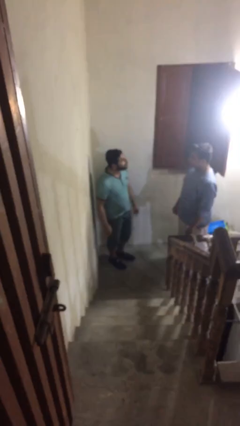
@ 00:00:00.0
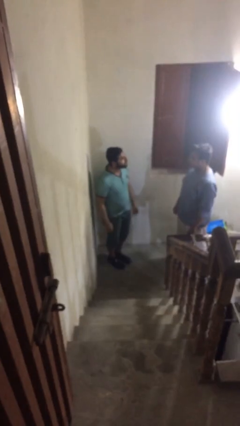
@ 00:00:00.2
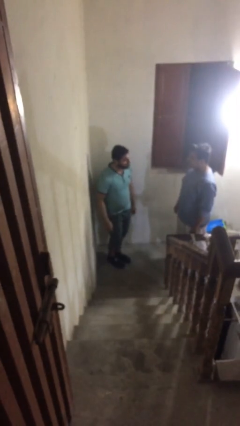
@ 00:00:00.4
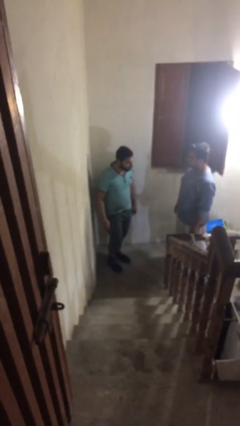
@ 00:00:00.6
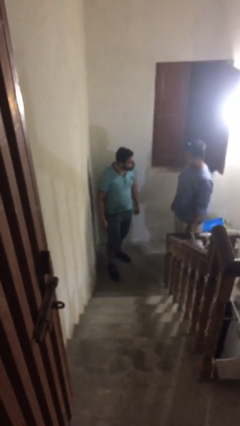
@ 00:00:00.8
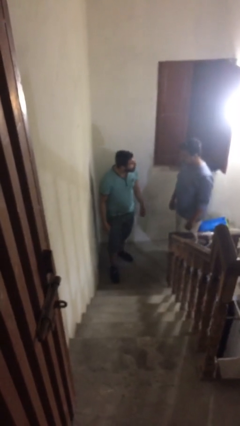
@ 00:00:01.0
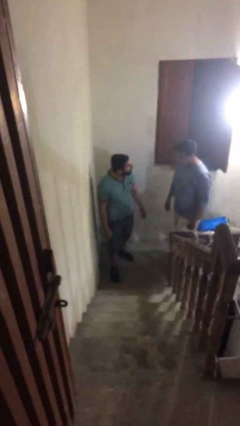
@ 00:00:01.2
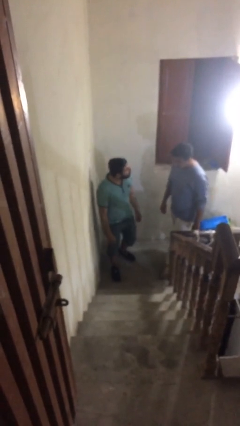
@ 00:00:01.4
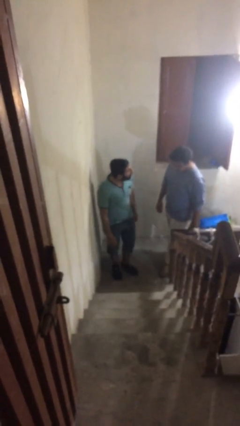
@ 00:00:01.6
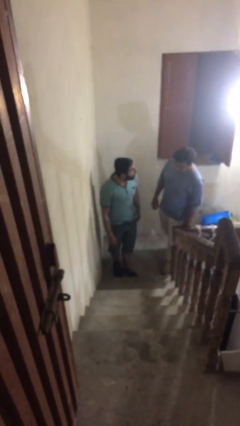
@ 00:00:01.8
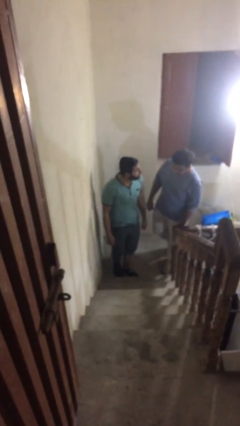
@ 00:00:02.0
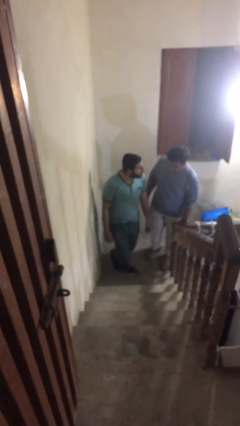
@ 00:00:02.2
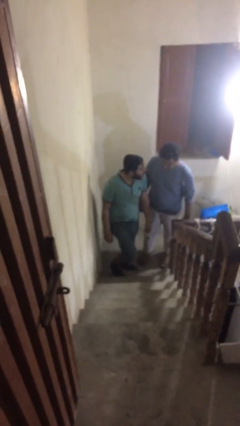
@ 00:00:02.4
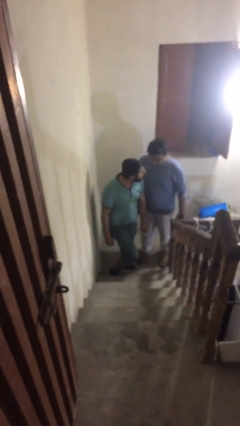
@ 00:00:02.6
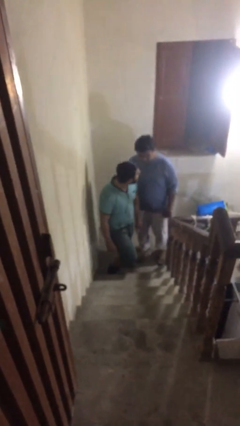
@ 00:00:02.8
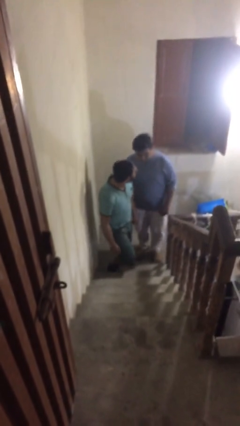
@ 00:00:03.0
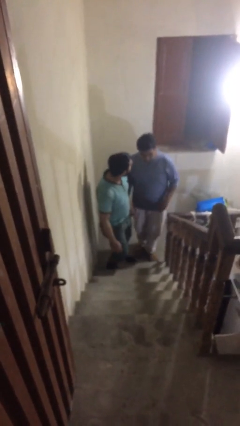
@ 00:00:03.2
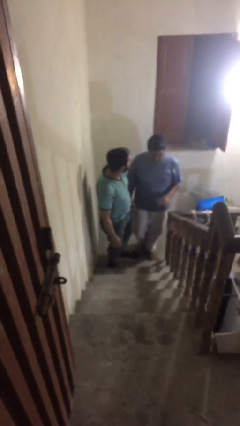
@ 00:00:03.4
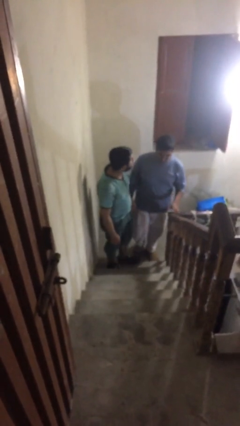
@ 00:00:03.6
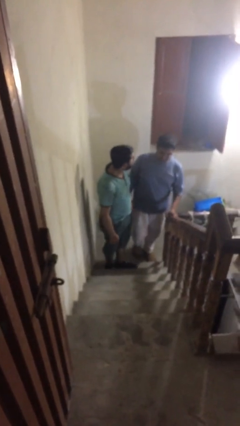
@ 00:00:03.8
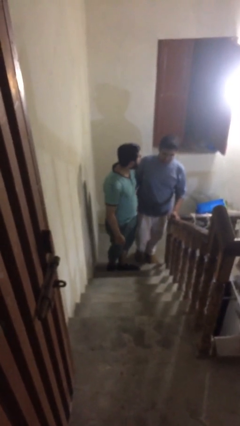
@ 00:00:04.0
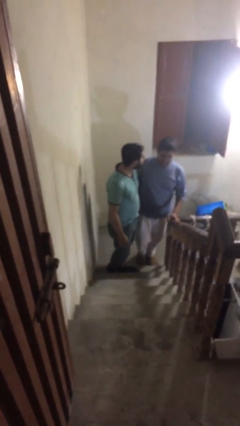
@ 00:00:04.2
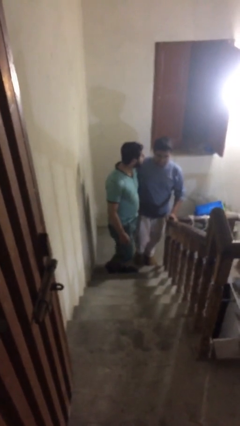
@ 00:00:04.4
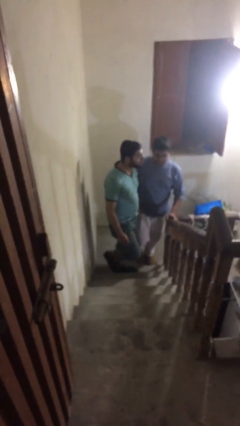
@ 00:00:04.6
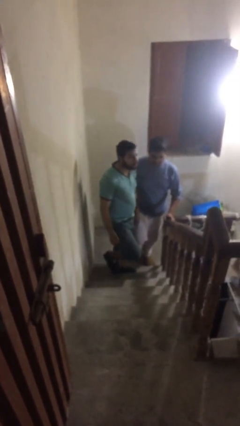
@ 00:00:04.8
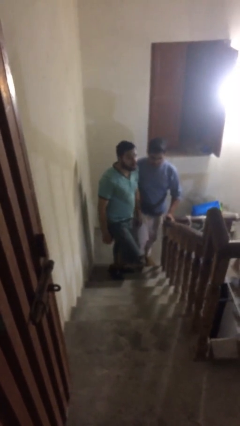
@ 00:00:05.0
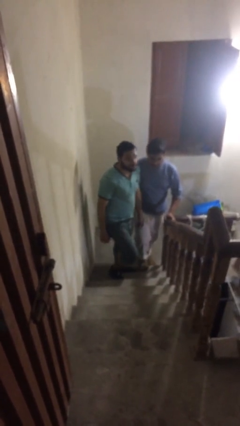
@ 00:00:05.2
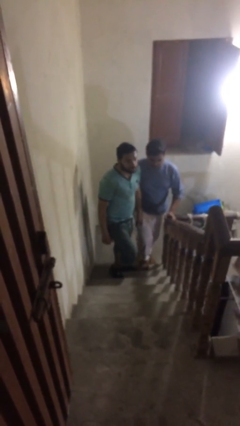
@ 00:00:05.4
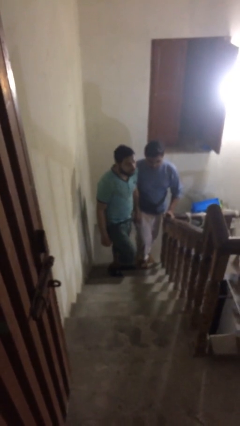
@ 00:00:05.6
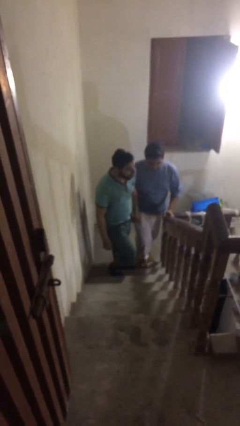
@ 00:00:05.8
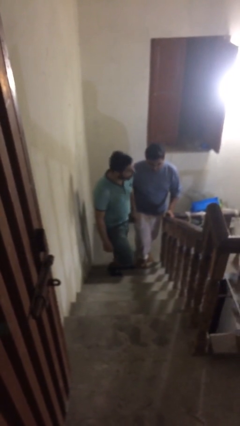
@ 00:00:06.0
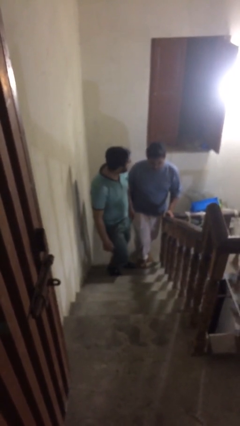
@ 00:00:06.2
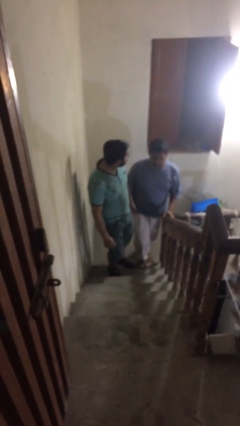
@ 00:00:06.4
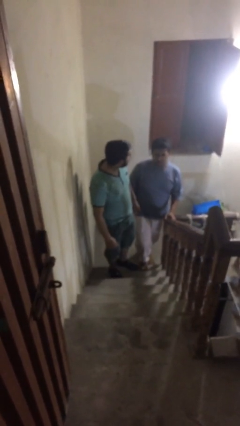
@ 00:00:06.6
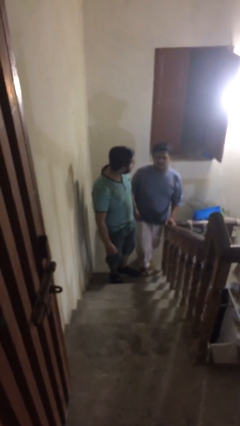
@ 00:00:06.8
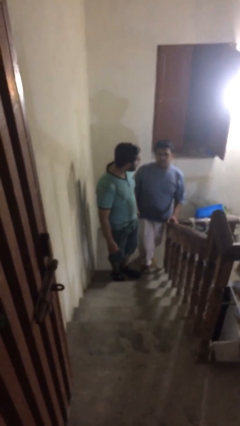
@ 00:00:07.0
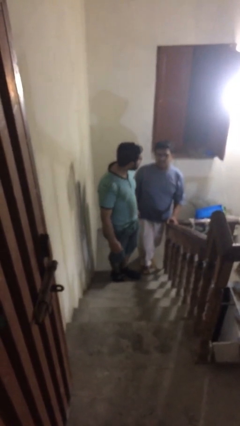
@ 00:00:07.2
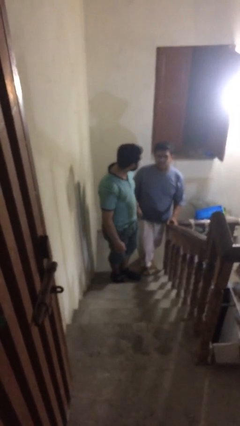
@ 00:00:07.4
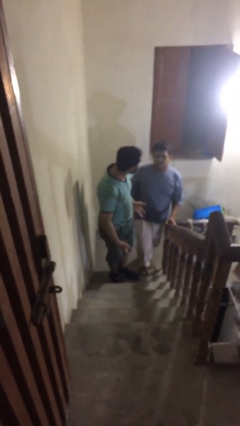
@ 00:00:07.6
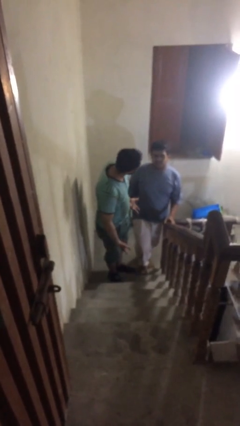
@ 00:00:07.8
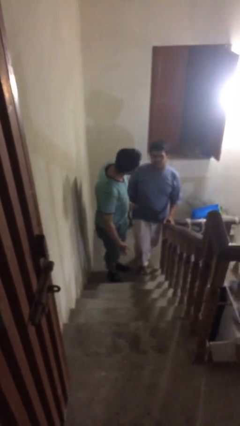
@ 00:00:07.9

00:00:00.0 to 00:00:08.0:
person talks to person

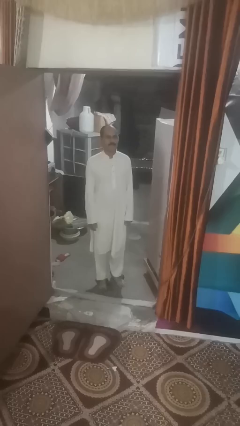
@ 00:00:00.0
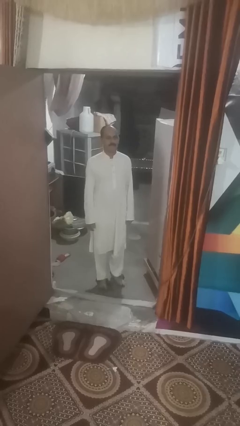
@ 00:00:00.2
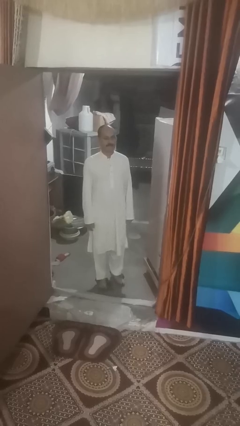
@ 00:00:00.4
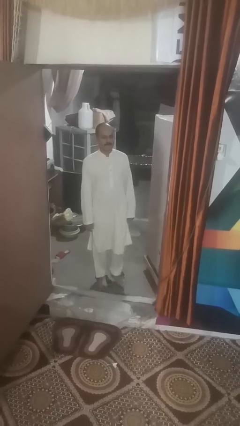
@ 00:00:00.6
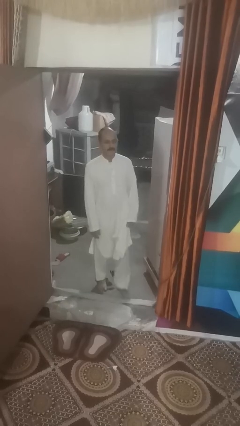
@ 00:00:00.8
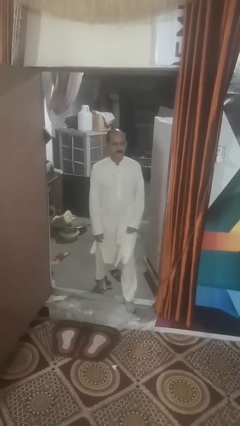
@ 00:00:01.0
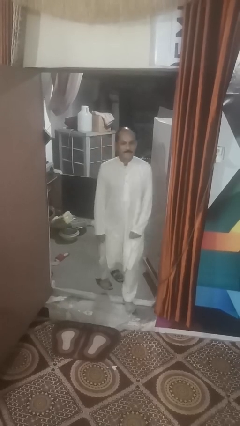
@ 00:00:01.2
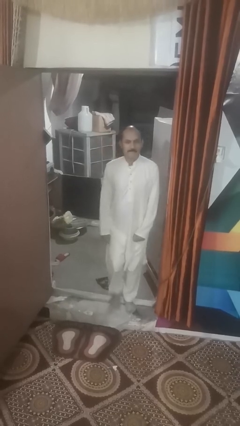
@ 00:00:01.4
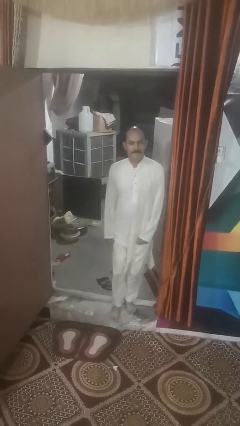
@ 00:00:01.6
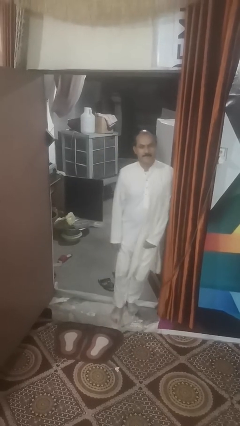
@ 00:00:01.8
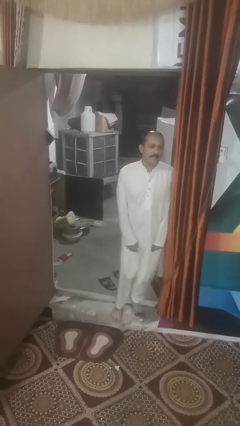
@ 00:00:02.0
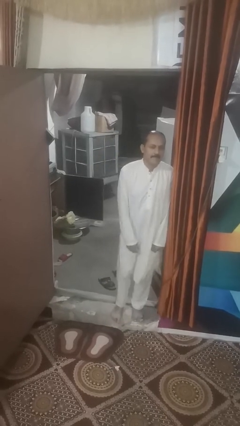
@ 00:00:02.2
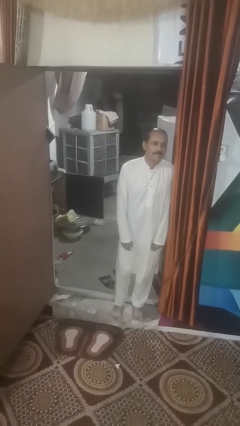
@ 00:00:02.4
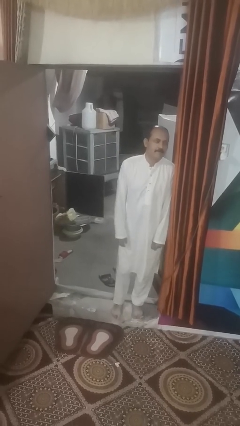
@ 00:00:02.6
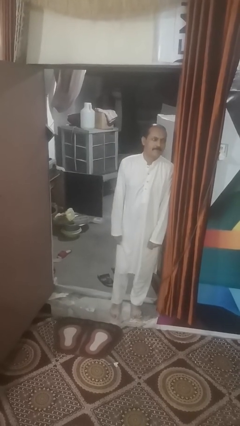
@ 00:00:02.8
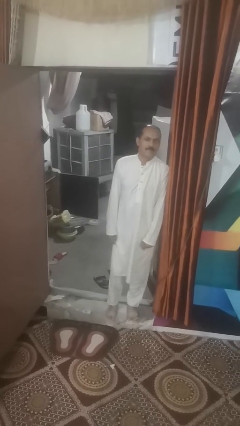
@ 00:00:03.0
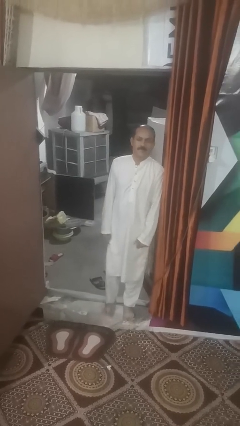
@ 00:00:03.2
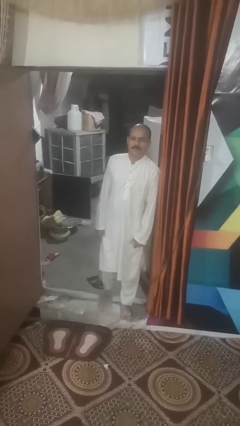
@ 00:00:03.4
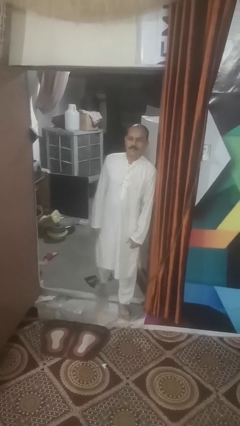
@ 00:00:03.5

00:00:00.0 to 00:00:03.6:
person bumps into wall

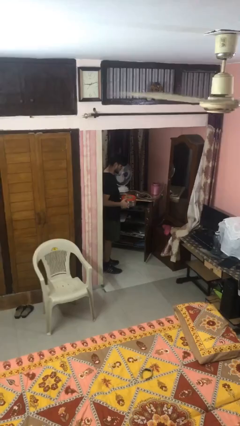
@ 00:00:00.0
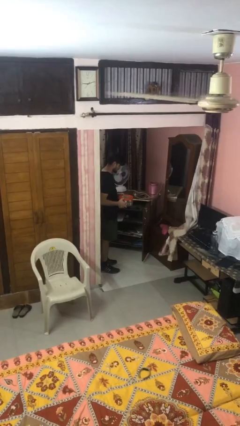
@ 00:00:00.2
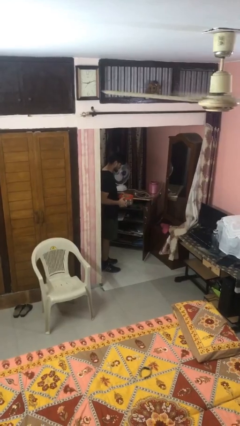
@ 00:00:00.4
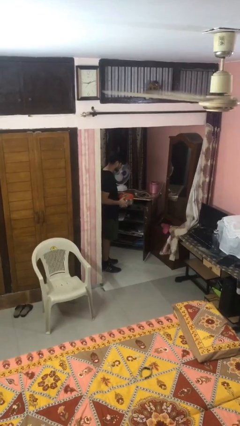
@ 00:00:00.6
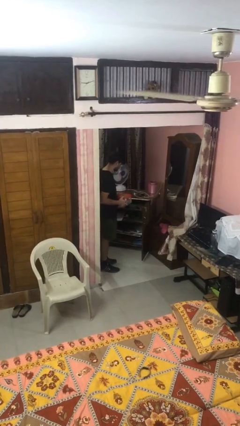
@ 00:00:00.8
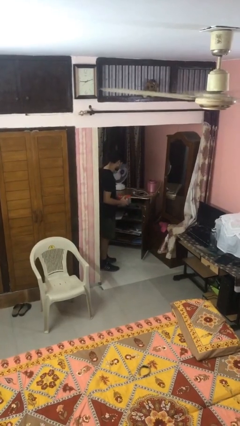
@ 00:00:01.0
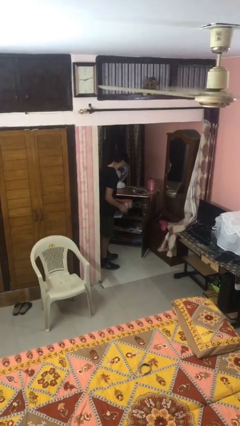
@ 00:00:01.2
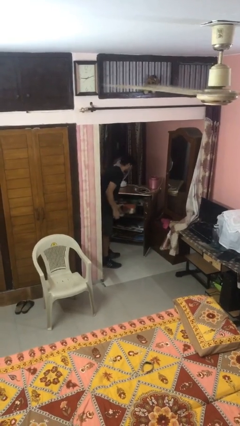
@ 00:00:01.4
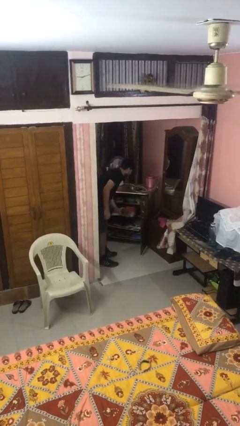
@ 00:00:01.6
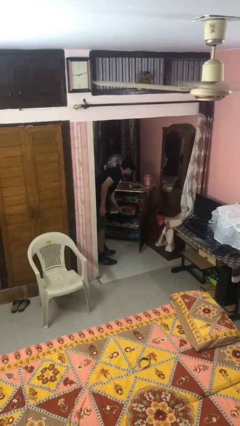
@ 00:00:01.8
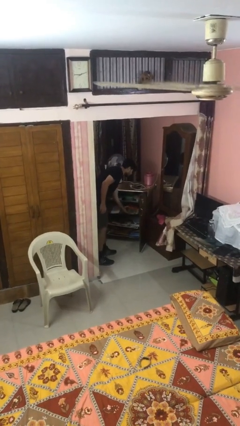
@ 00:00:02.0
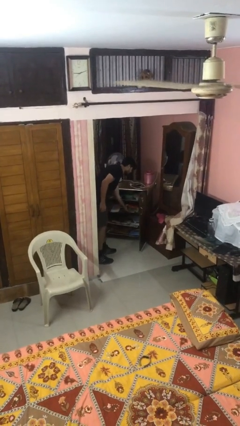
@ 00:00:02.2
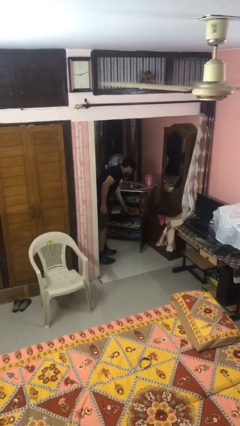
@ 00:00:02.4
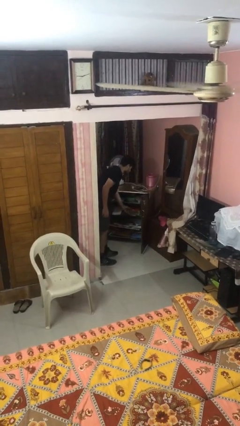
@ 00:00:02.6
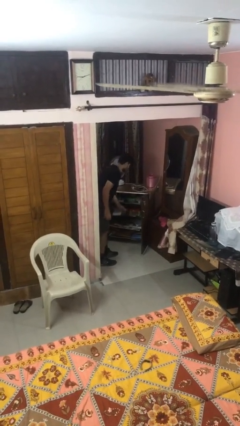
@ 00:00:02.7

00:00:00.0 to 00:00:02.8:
person puts down object into cabinet

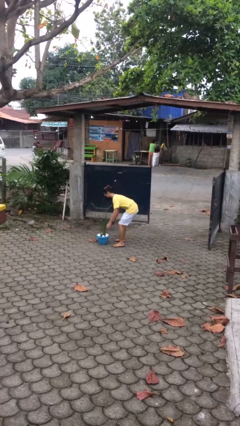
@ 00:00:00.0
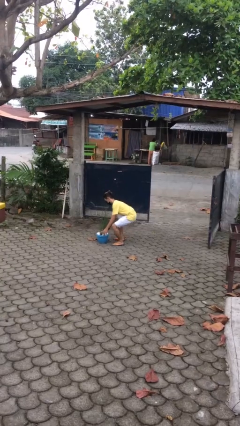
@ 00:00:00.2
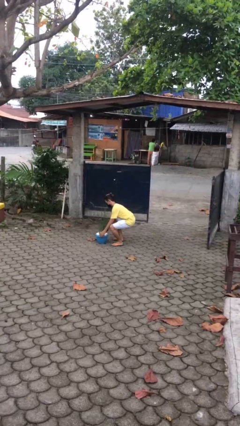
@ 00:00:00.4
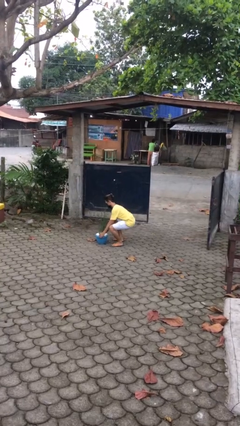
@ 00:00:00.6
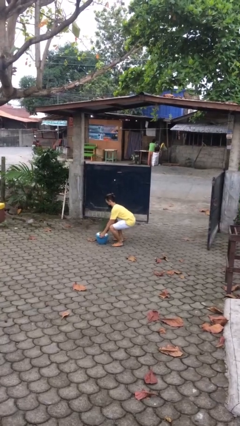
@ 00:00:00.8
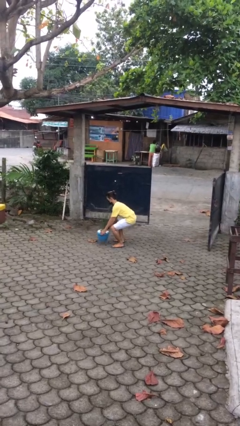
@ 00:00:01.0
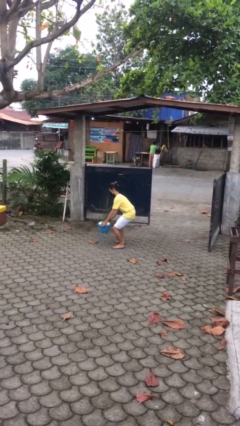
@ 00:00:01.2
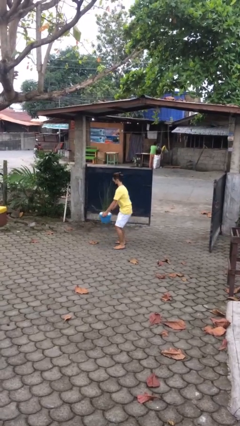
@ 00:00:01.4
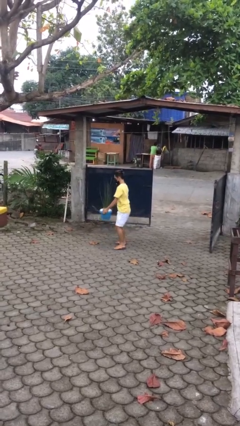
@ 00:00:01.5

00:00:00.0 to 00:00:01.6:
person picks up object from floor

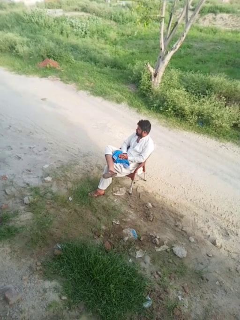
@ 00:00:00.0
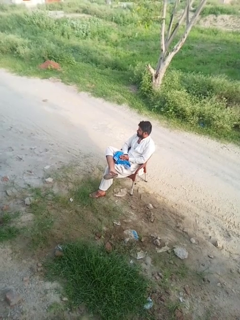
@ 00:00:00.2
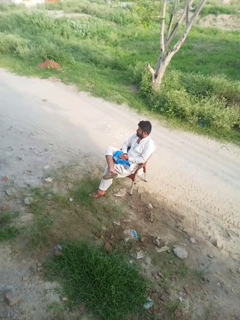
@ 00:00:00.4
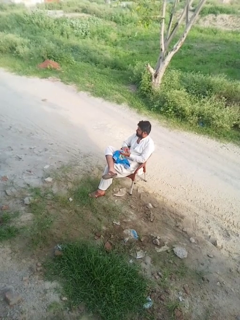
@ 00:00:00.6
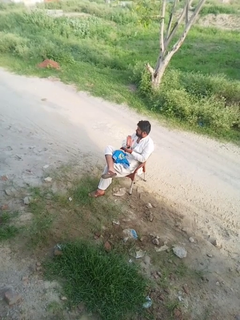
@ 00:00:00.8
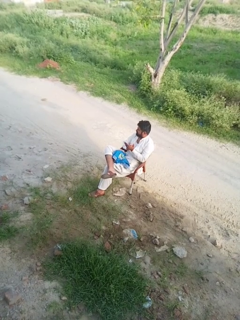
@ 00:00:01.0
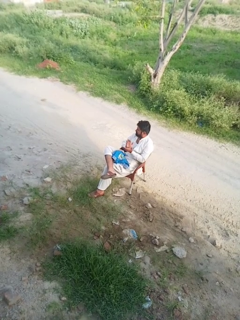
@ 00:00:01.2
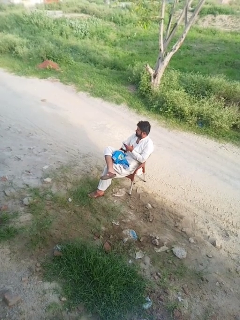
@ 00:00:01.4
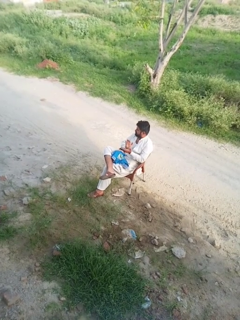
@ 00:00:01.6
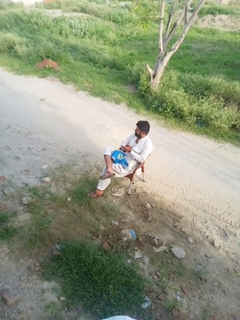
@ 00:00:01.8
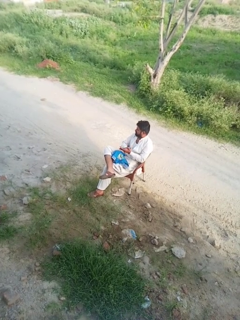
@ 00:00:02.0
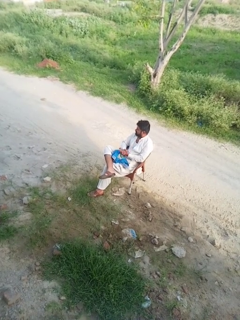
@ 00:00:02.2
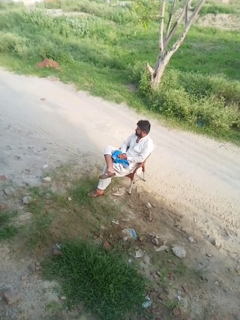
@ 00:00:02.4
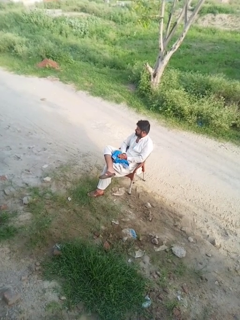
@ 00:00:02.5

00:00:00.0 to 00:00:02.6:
person claps hands
